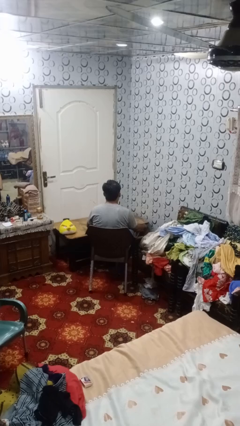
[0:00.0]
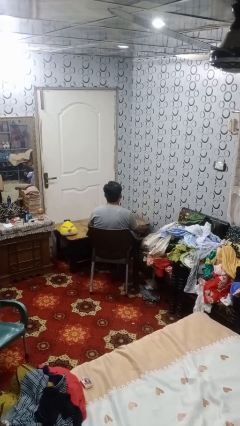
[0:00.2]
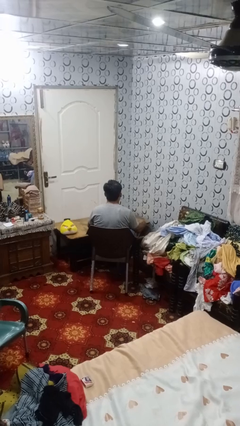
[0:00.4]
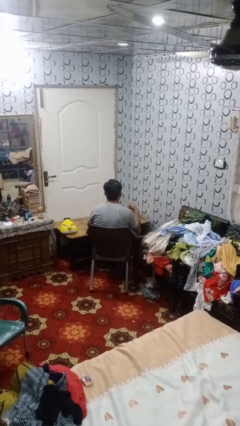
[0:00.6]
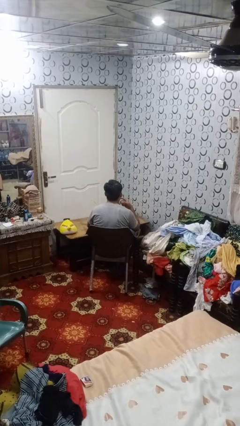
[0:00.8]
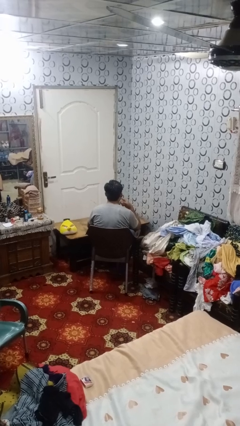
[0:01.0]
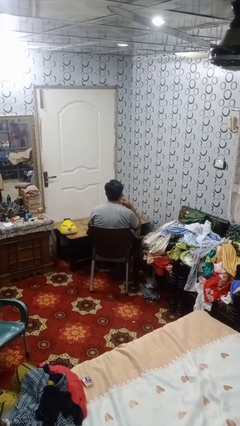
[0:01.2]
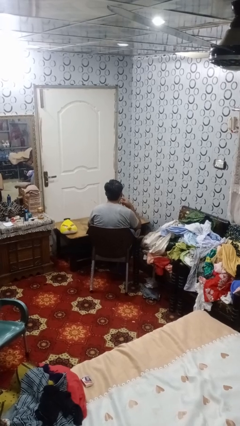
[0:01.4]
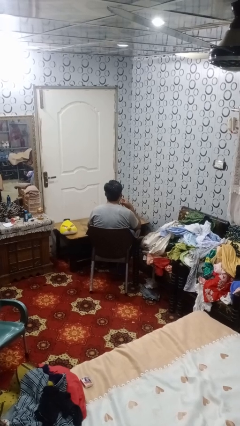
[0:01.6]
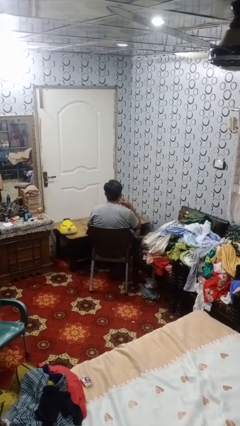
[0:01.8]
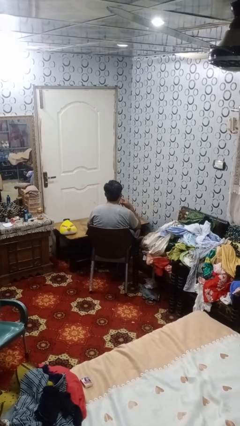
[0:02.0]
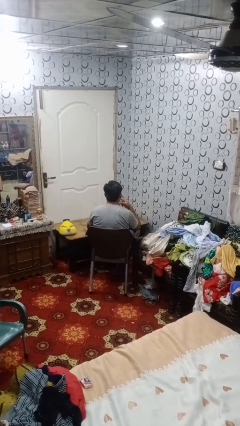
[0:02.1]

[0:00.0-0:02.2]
person licks fingers

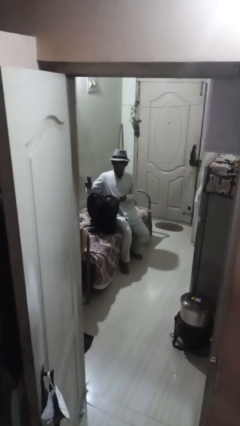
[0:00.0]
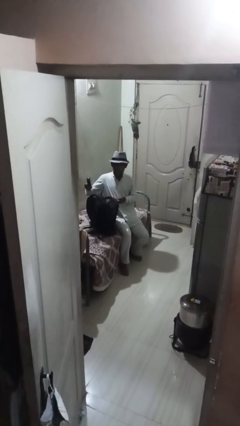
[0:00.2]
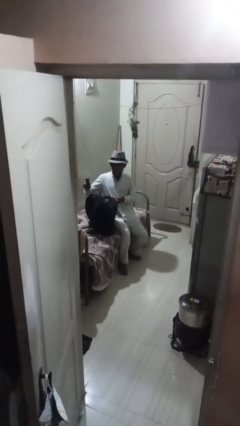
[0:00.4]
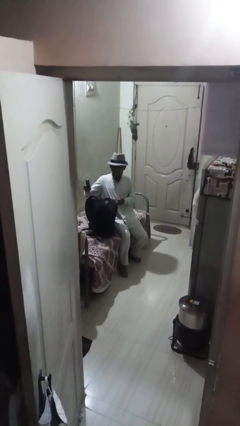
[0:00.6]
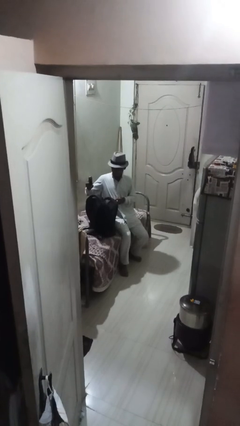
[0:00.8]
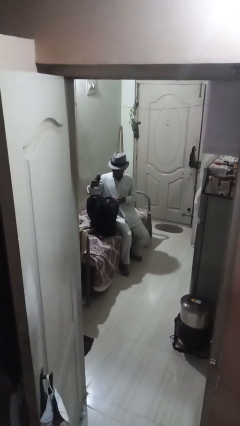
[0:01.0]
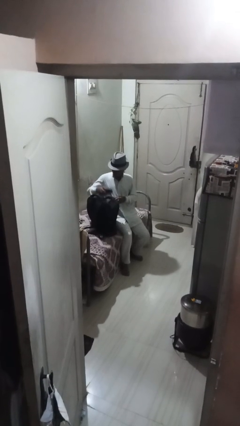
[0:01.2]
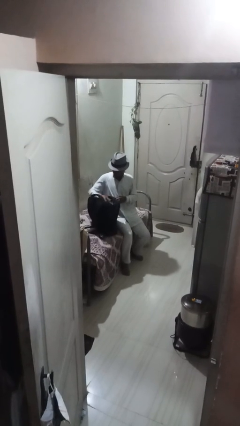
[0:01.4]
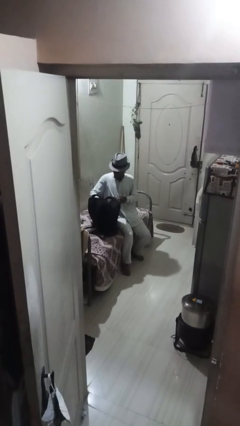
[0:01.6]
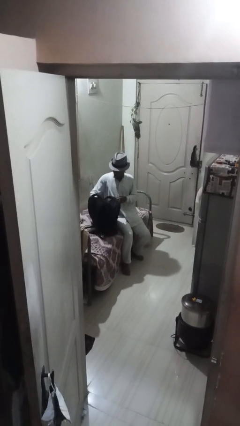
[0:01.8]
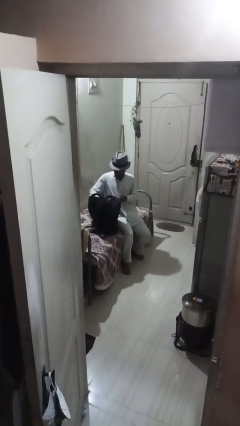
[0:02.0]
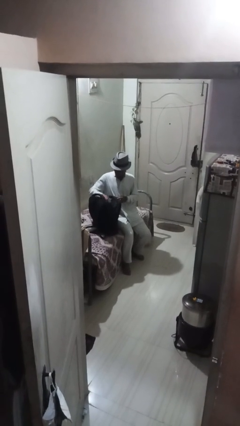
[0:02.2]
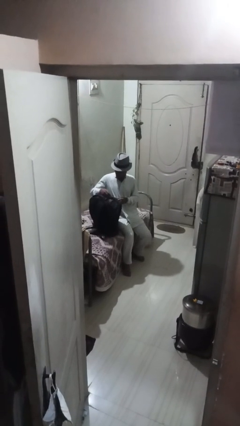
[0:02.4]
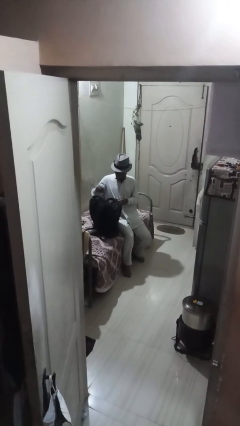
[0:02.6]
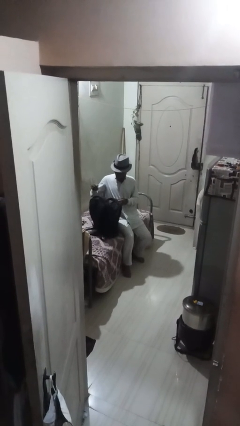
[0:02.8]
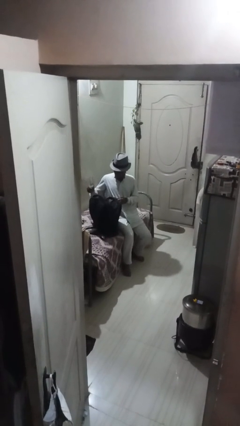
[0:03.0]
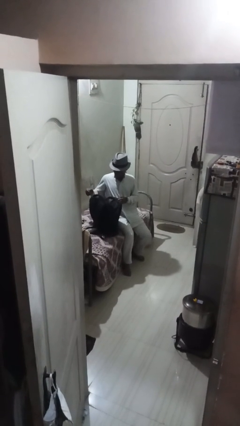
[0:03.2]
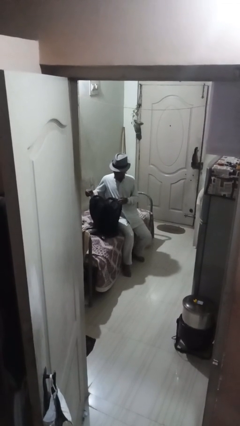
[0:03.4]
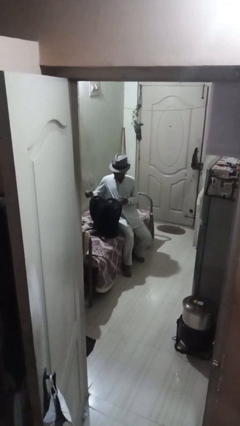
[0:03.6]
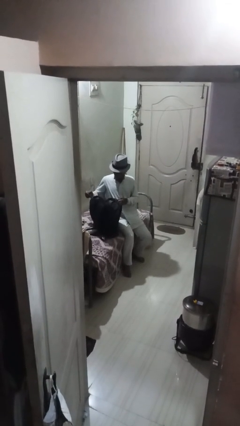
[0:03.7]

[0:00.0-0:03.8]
person puts object into backpack

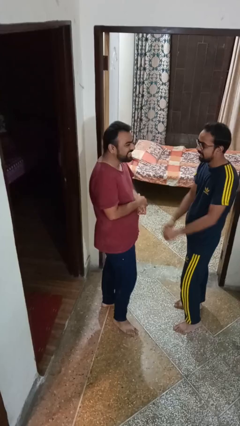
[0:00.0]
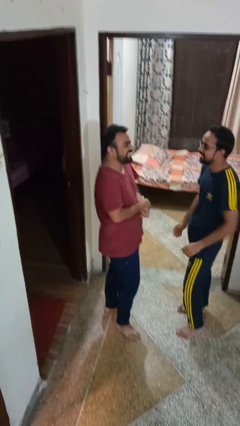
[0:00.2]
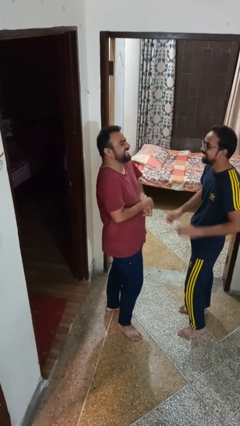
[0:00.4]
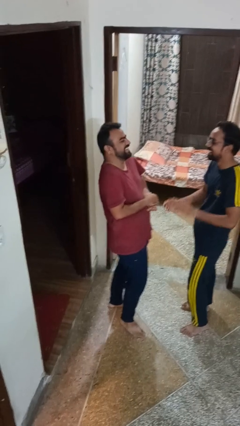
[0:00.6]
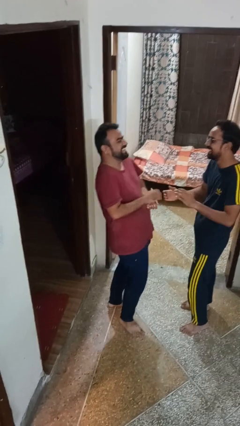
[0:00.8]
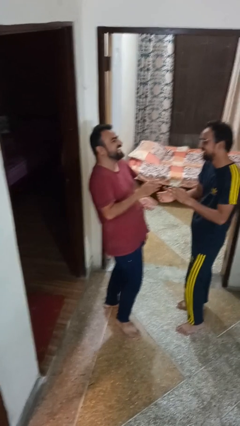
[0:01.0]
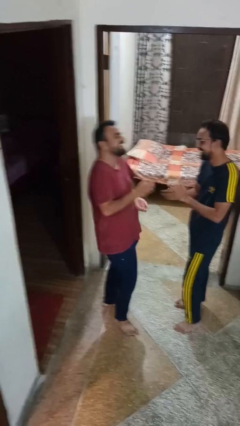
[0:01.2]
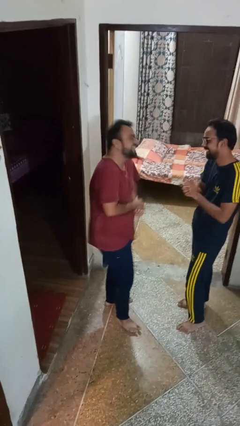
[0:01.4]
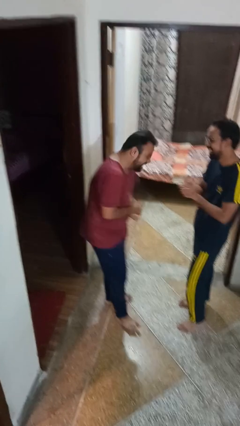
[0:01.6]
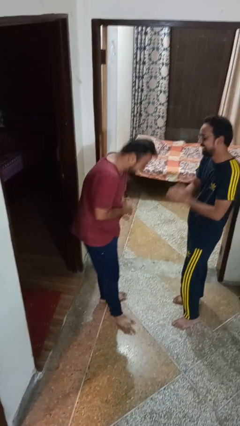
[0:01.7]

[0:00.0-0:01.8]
person laughs with person

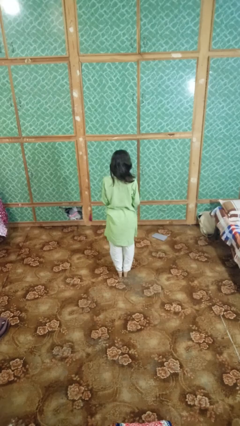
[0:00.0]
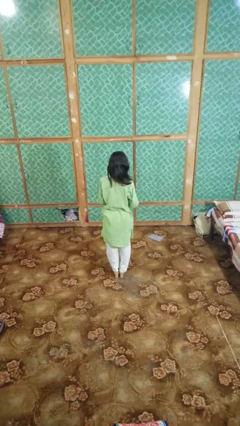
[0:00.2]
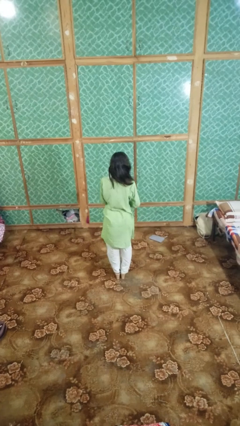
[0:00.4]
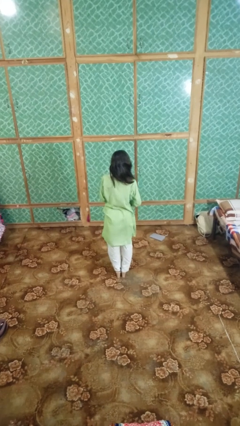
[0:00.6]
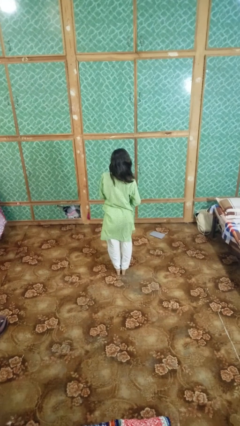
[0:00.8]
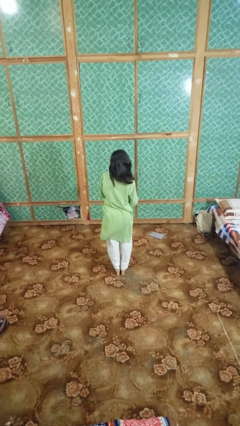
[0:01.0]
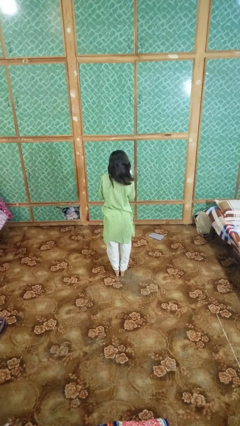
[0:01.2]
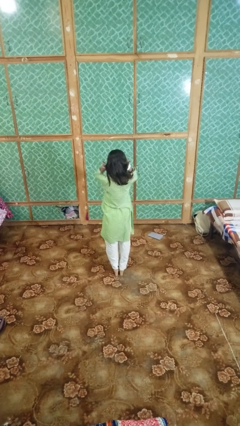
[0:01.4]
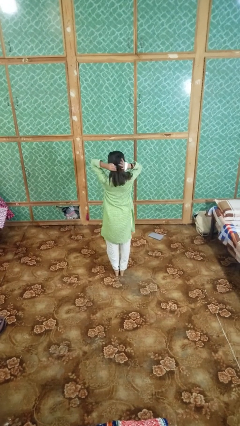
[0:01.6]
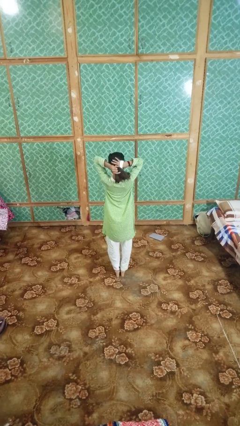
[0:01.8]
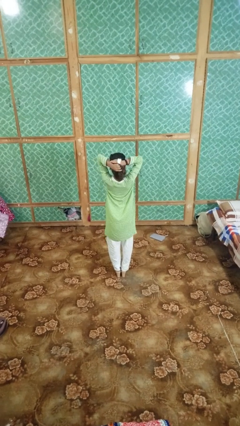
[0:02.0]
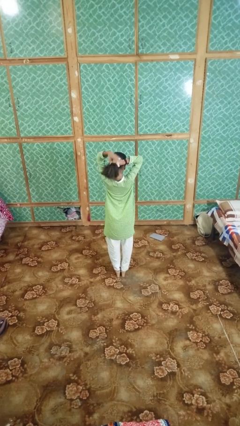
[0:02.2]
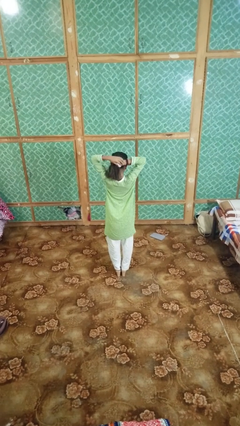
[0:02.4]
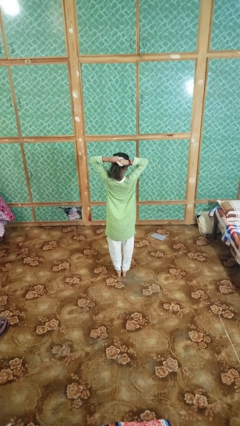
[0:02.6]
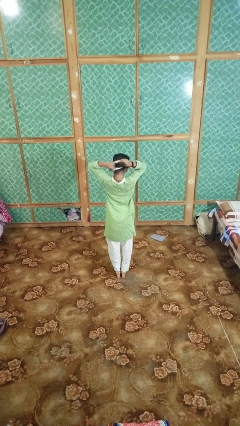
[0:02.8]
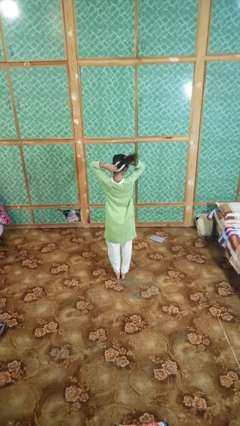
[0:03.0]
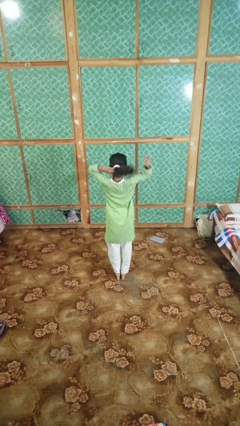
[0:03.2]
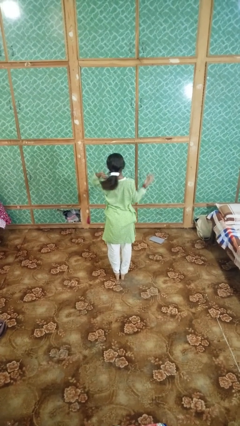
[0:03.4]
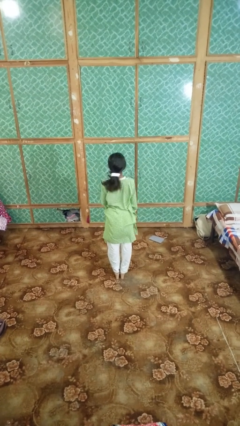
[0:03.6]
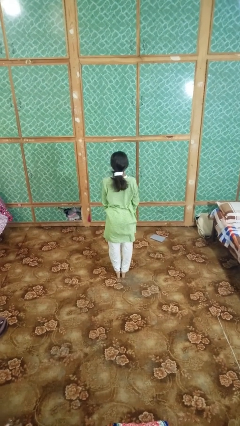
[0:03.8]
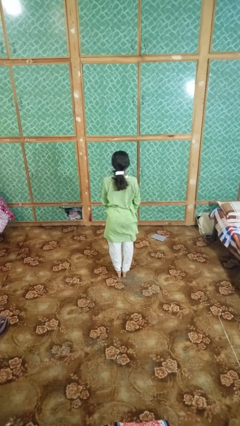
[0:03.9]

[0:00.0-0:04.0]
person puts hair in ponytail

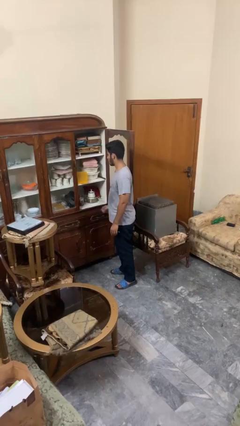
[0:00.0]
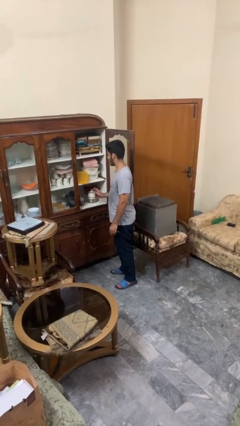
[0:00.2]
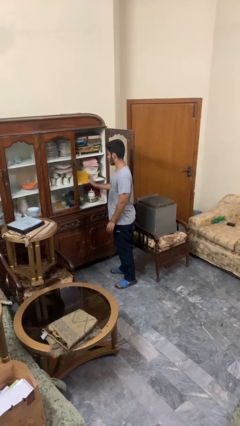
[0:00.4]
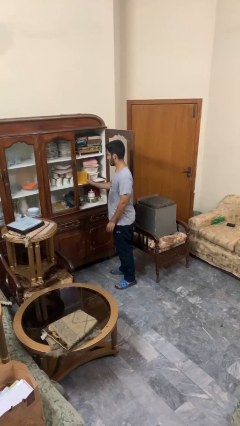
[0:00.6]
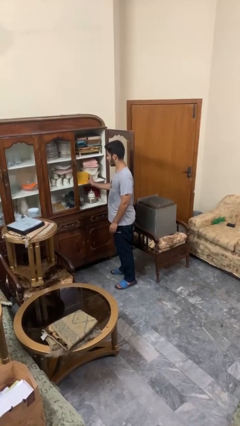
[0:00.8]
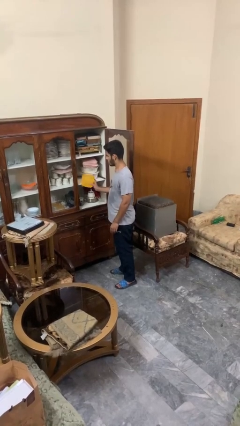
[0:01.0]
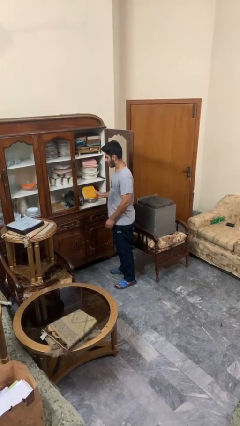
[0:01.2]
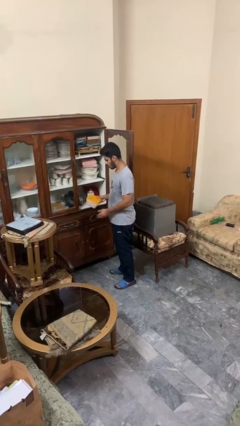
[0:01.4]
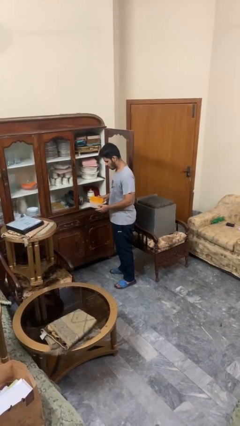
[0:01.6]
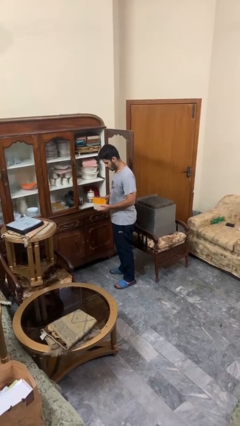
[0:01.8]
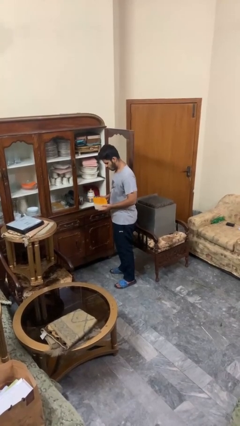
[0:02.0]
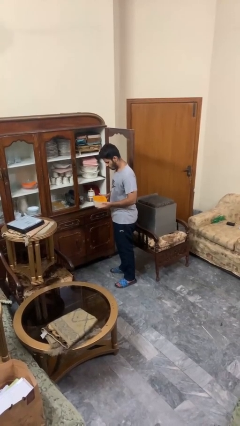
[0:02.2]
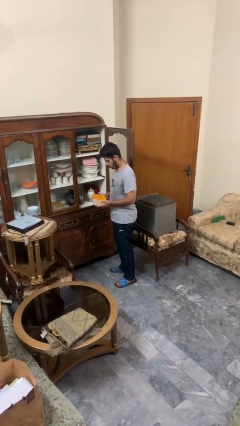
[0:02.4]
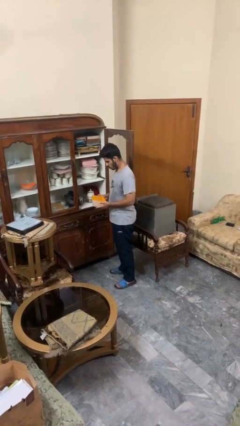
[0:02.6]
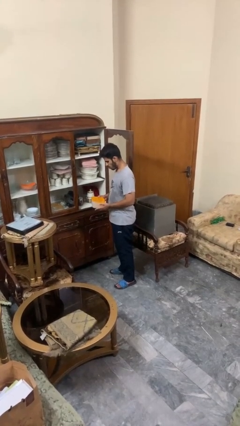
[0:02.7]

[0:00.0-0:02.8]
person picks up object from cabinet

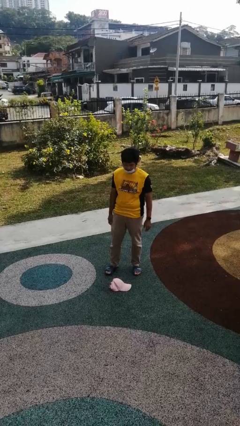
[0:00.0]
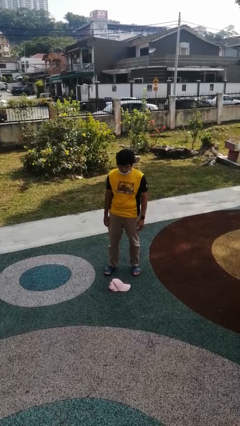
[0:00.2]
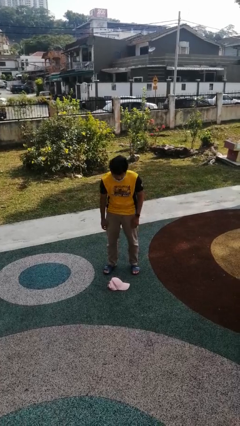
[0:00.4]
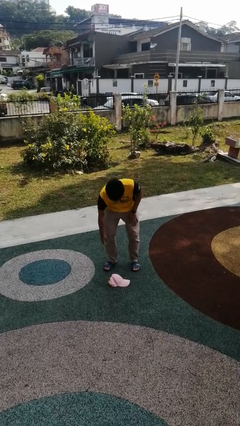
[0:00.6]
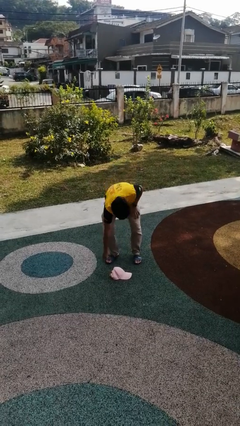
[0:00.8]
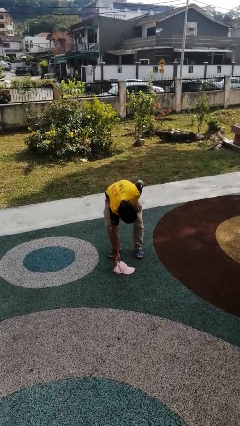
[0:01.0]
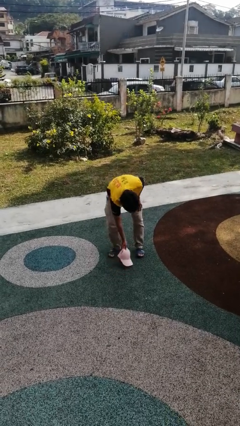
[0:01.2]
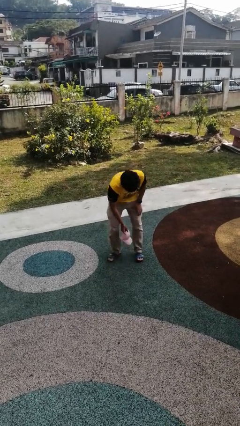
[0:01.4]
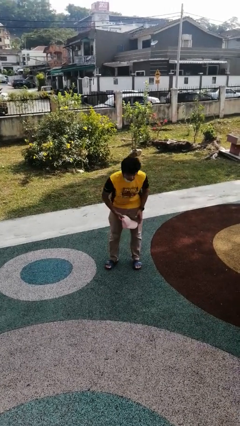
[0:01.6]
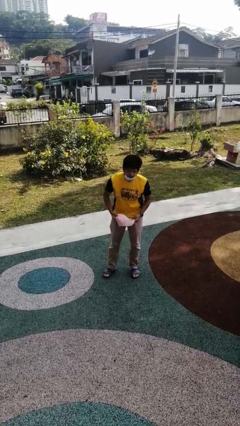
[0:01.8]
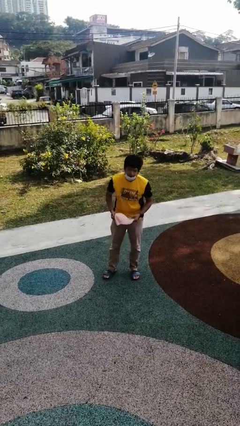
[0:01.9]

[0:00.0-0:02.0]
person picks up object from floor

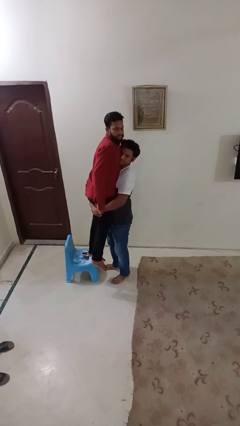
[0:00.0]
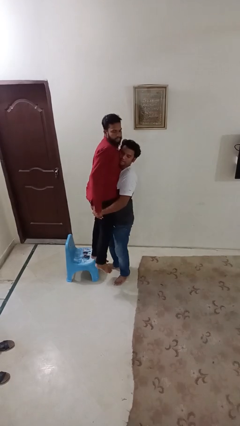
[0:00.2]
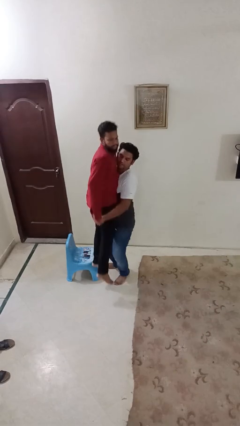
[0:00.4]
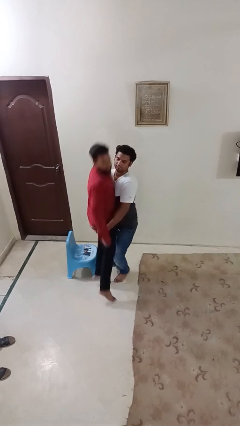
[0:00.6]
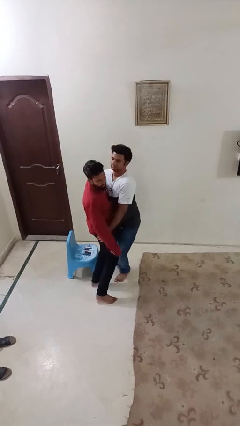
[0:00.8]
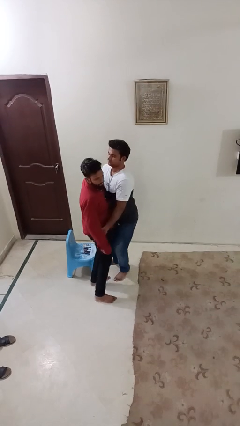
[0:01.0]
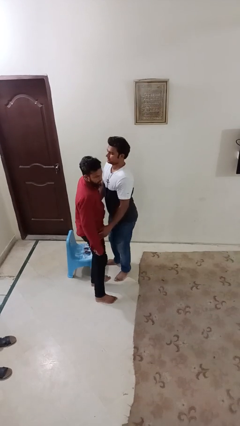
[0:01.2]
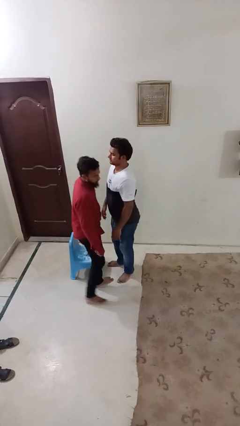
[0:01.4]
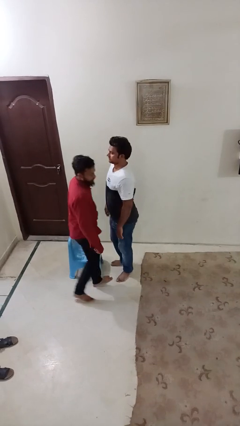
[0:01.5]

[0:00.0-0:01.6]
person puts down person
